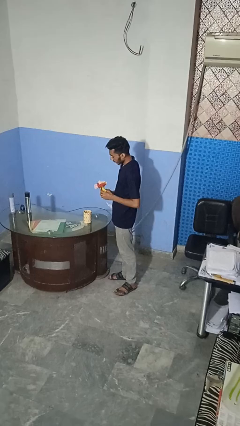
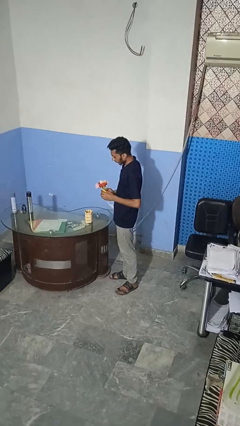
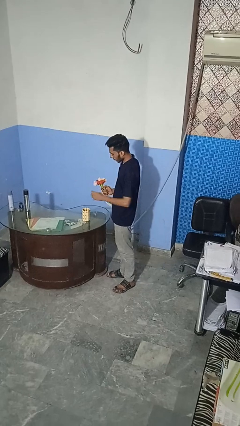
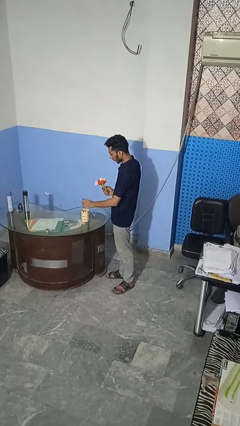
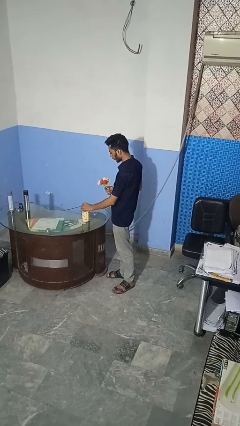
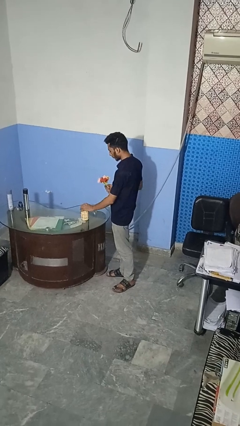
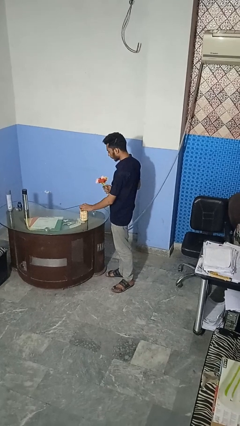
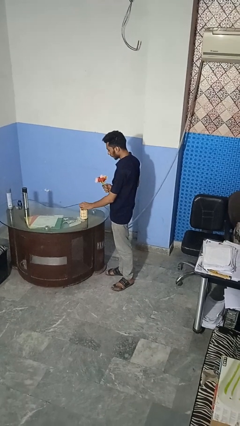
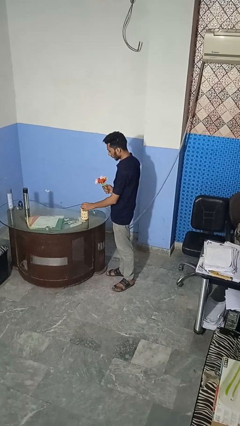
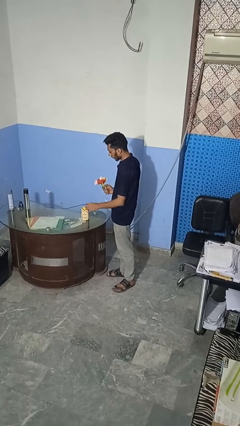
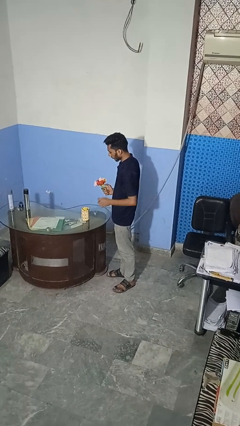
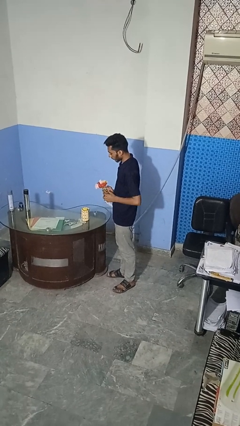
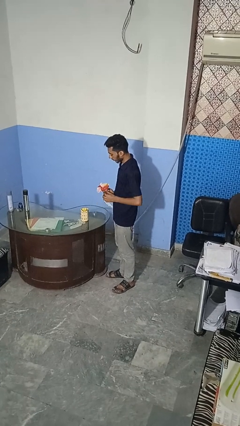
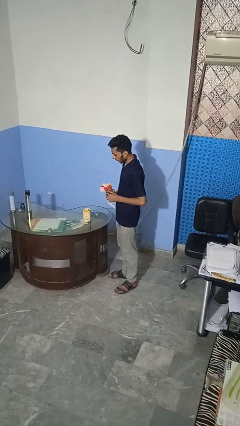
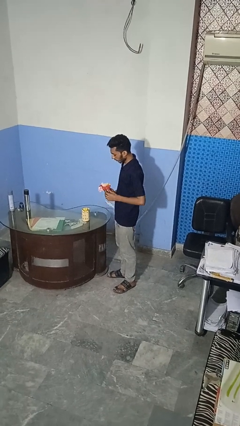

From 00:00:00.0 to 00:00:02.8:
person arranges flowers in vase

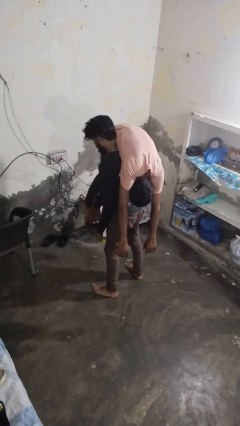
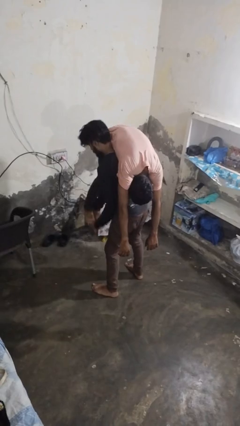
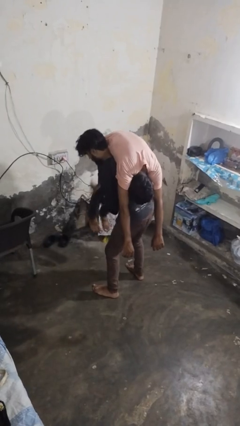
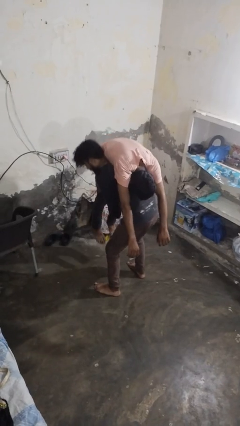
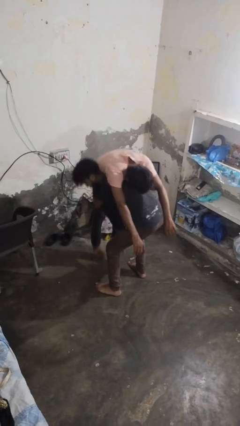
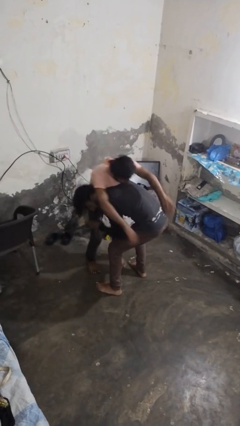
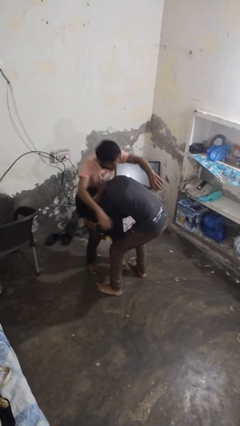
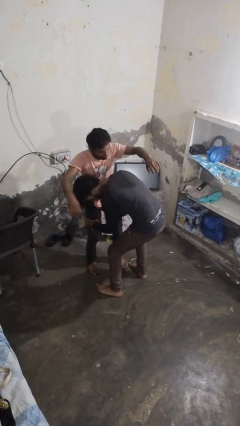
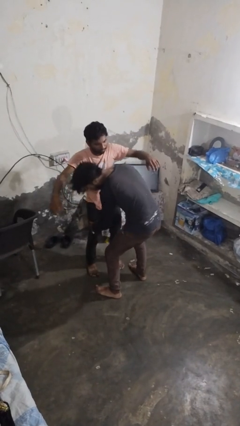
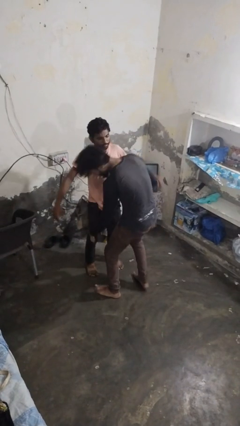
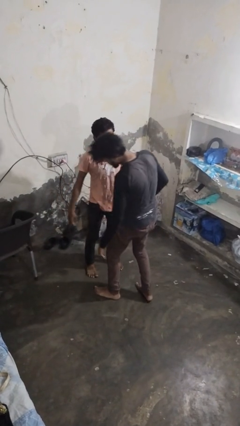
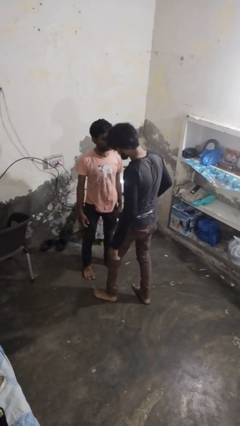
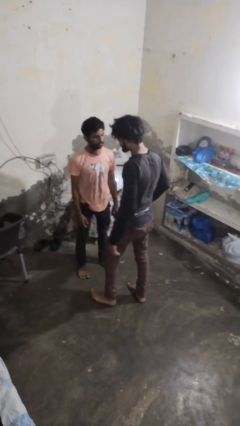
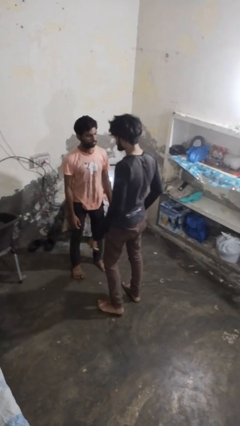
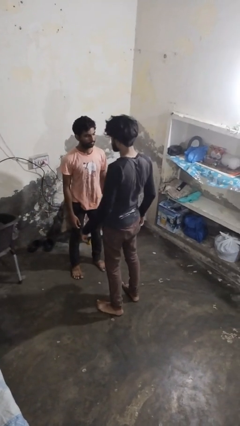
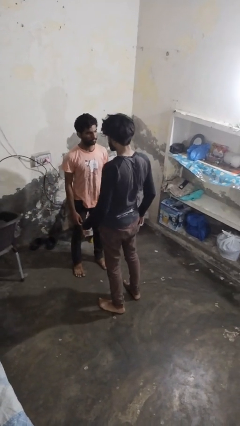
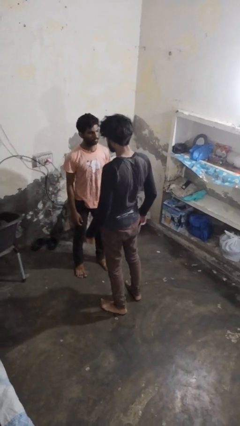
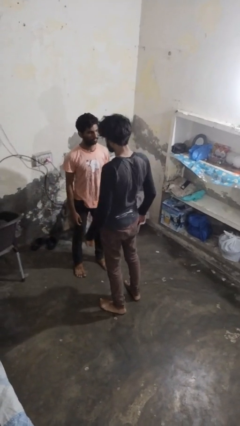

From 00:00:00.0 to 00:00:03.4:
person puts down person

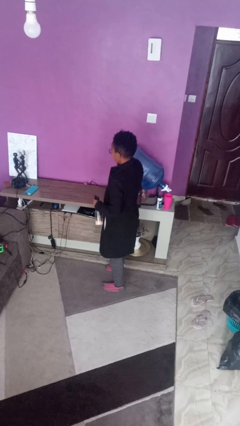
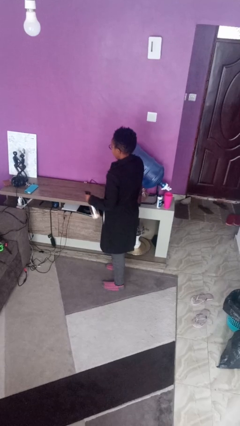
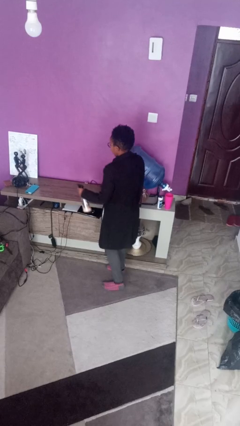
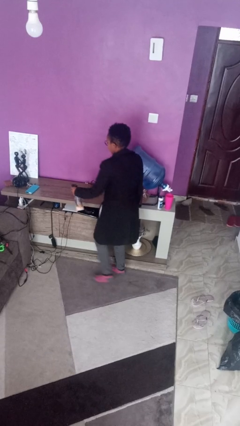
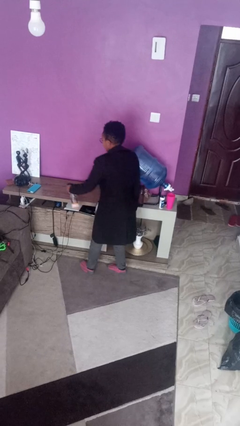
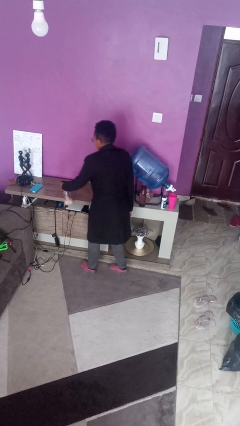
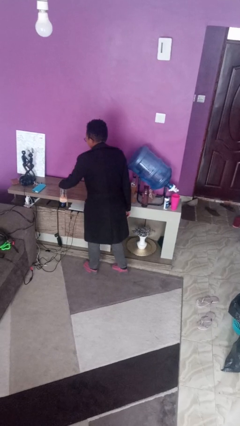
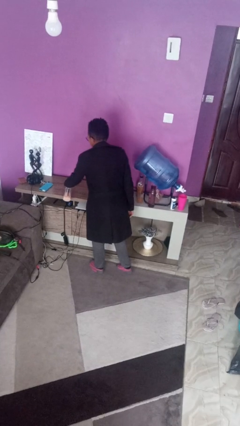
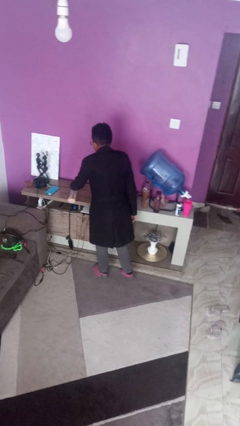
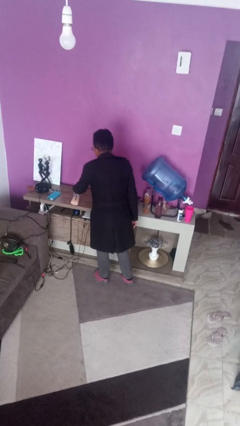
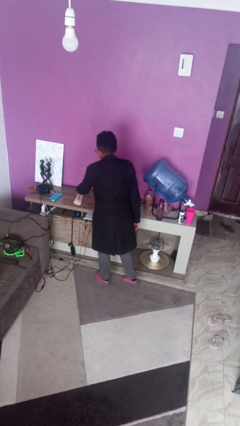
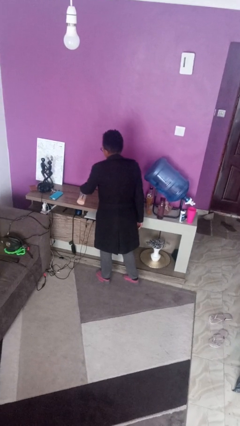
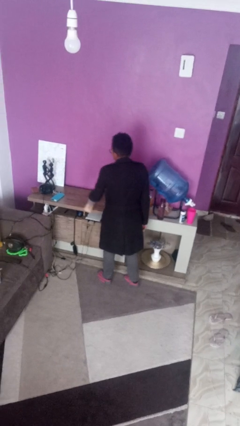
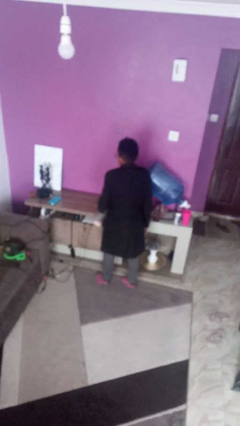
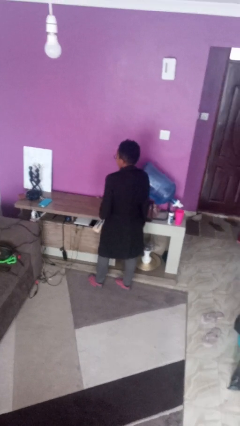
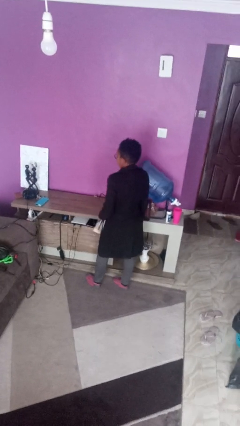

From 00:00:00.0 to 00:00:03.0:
person sprays from bottle

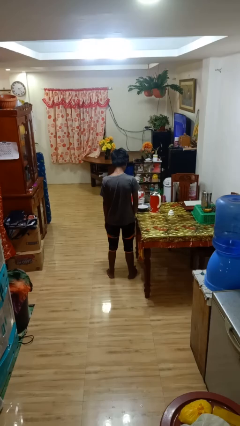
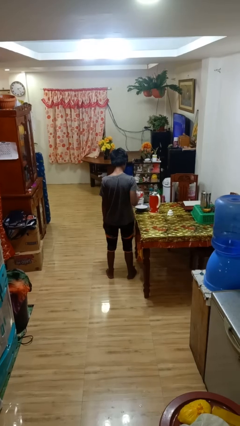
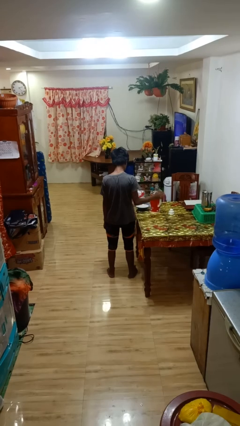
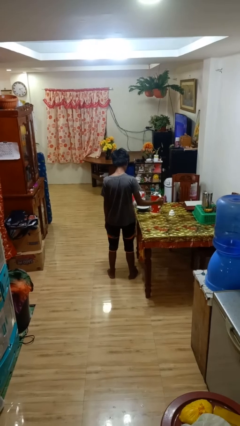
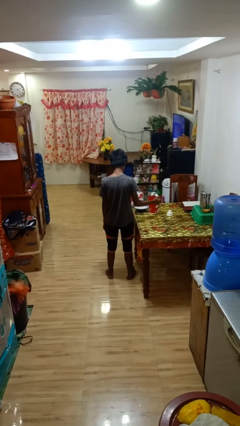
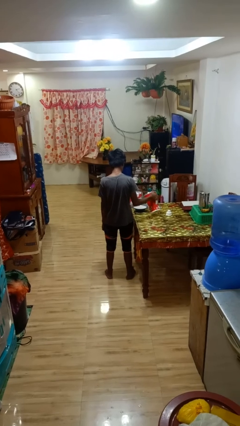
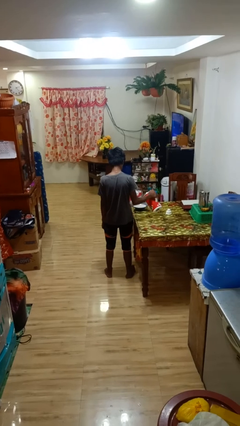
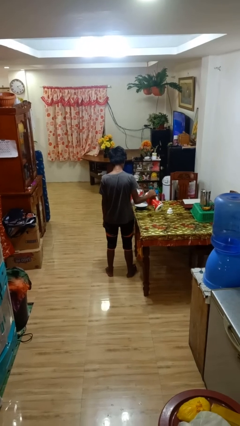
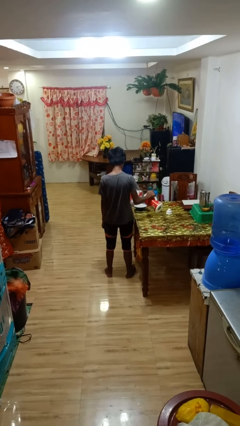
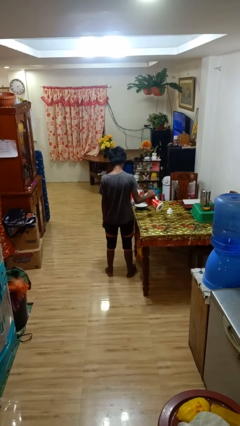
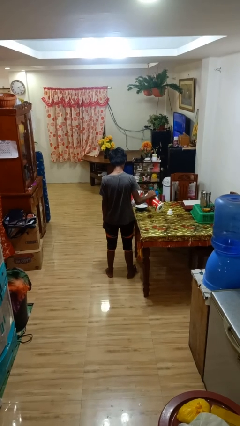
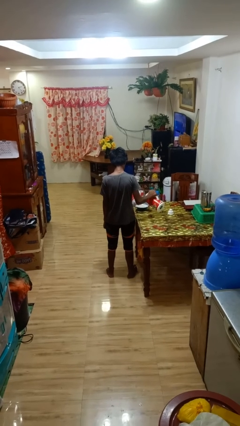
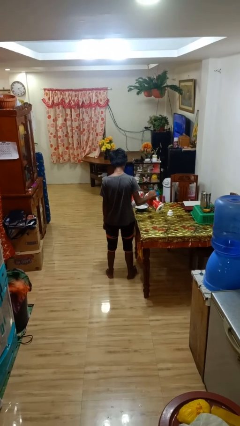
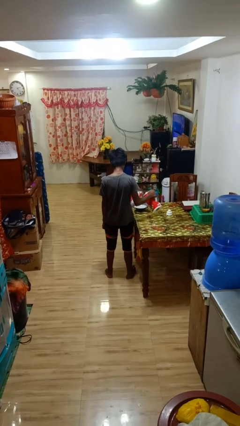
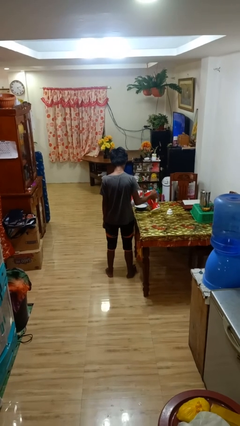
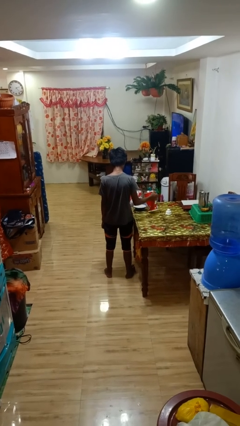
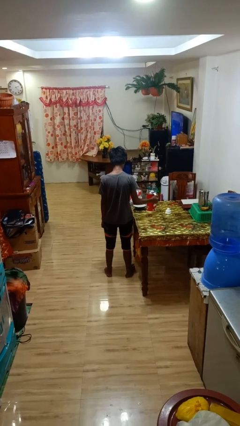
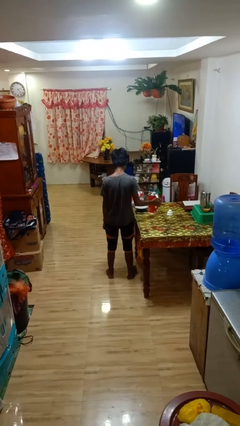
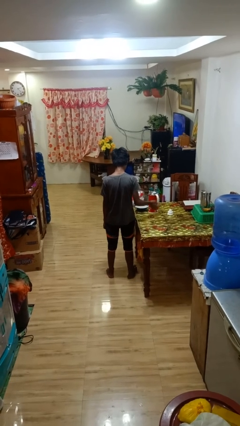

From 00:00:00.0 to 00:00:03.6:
person pours into bowl

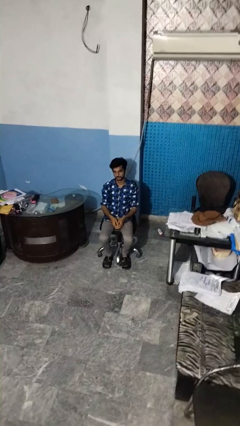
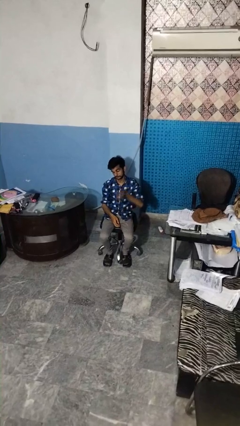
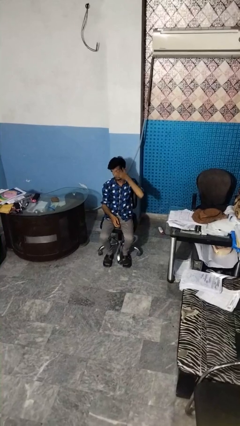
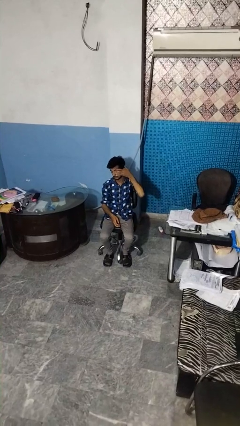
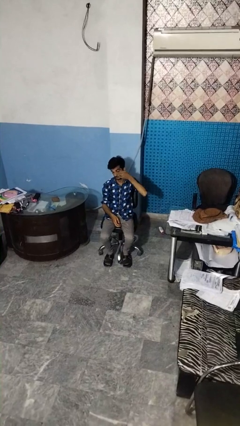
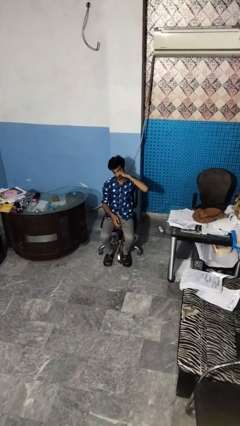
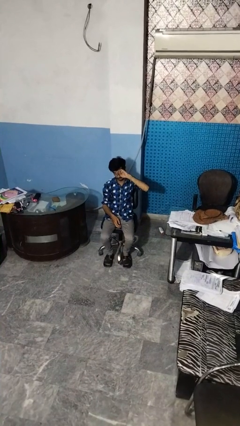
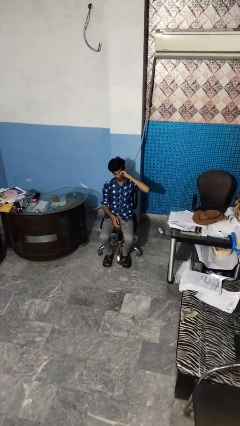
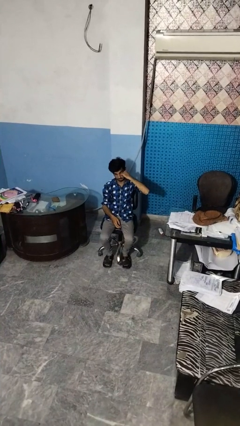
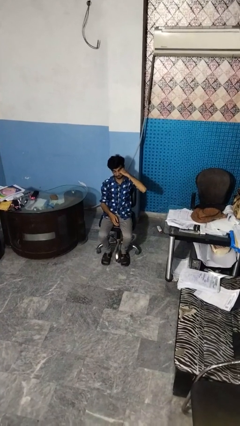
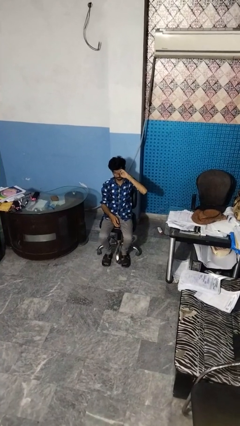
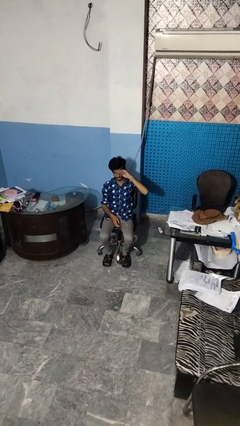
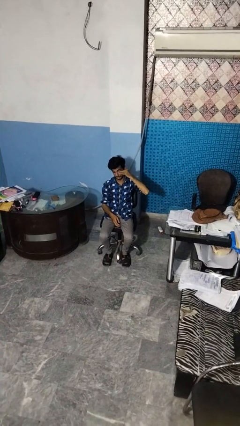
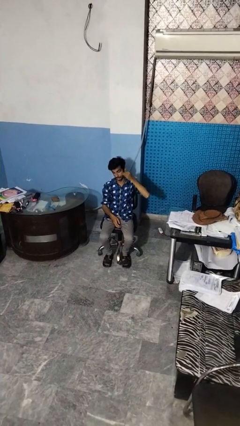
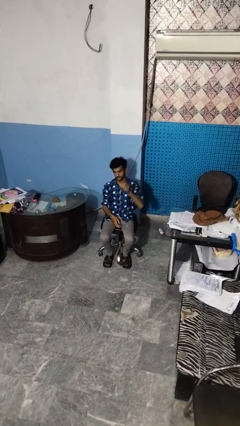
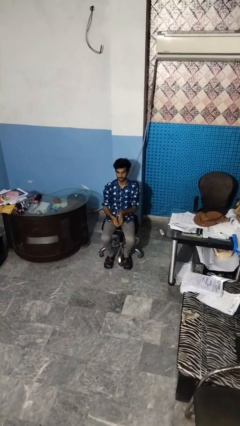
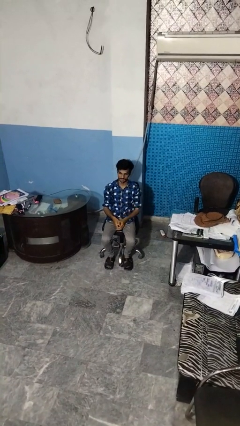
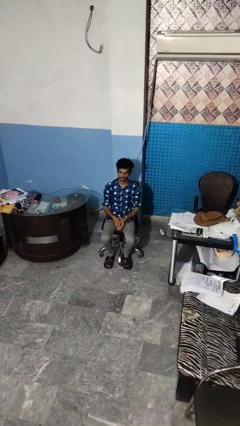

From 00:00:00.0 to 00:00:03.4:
person rubs eyes

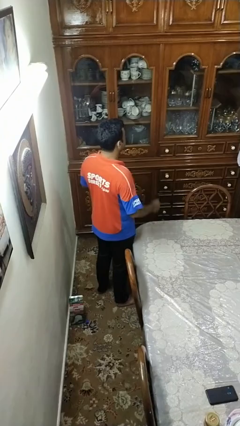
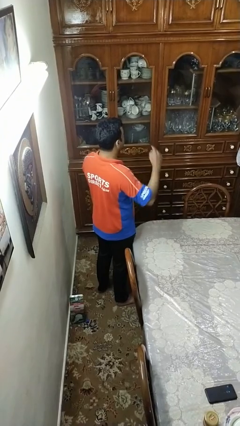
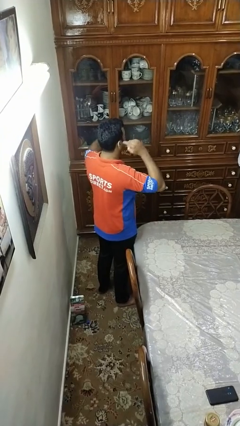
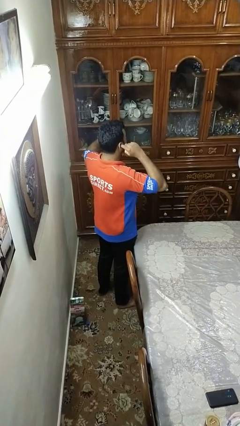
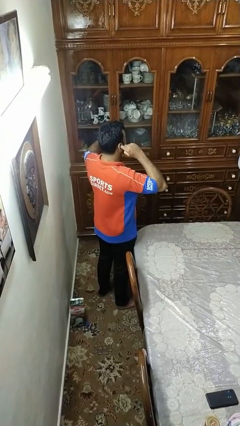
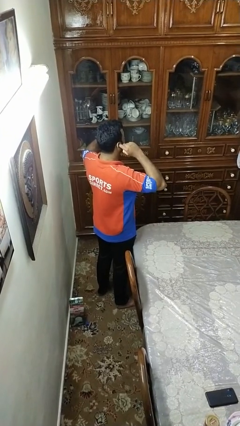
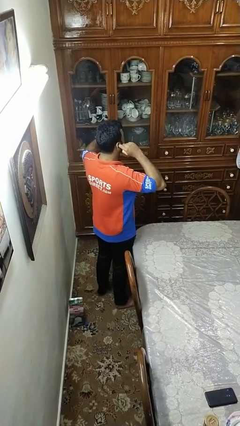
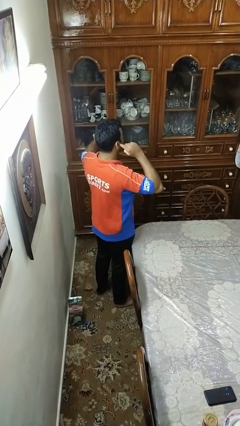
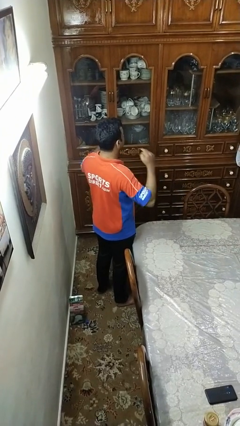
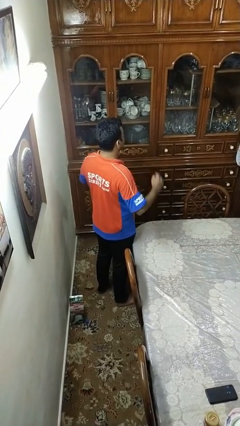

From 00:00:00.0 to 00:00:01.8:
person puts fingers in ear
